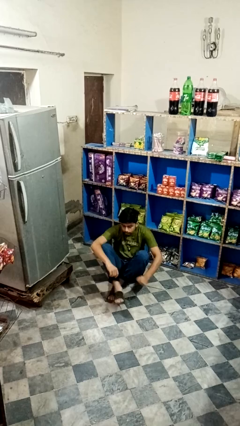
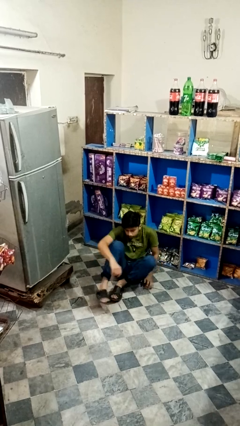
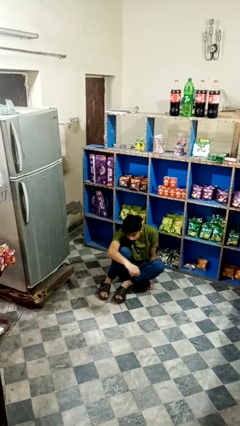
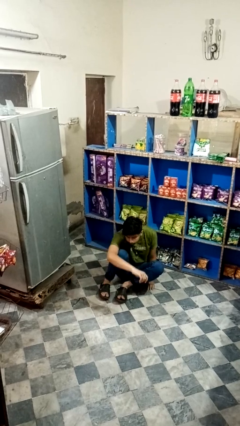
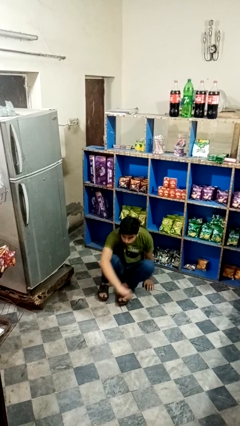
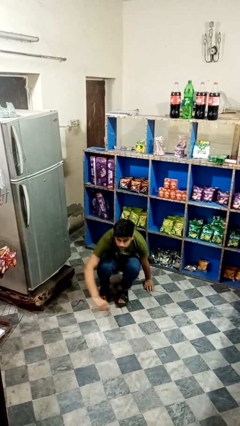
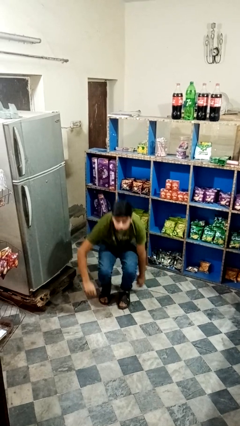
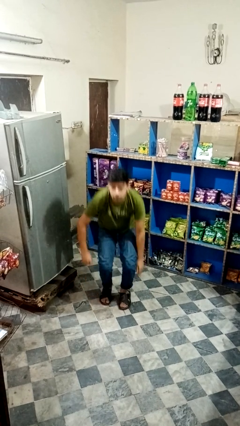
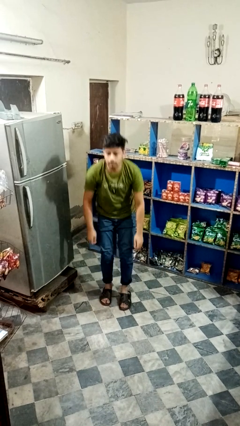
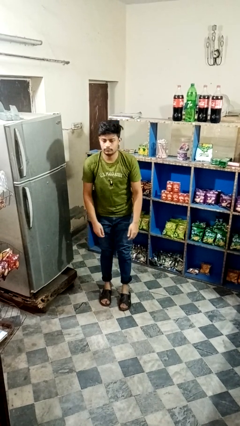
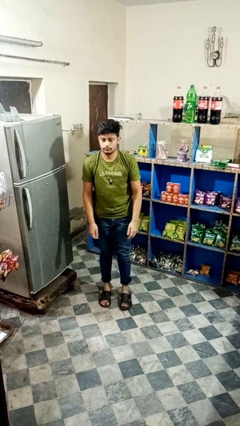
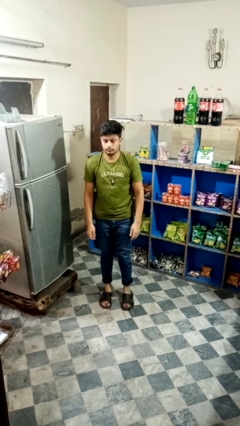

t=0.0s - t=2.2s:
person stands up from floor

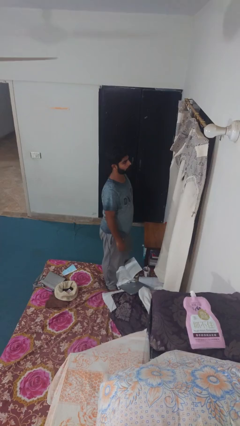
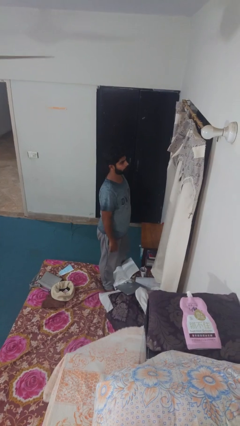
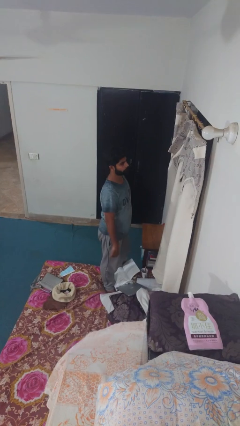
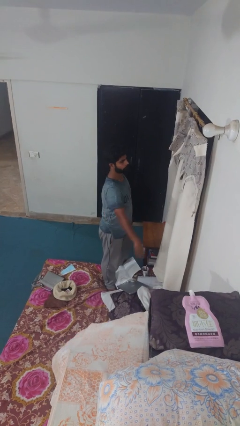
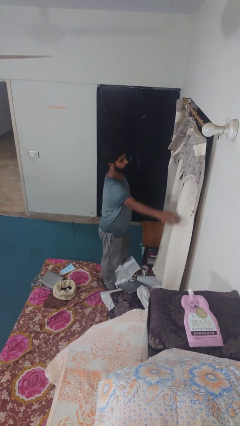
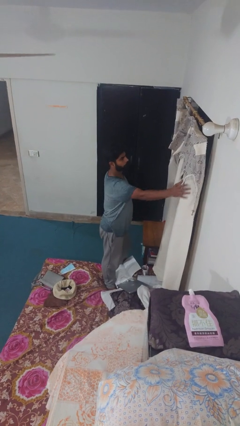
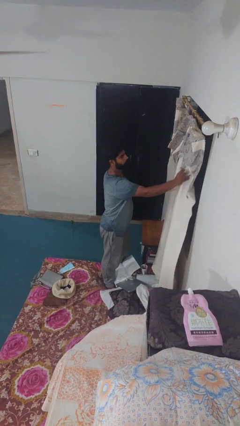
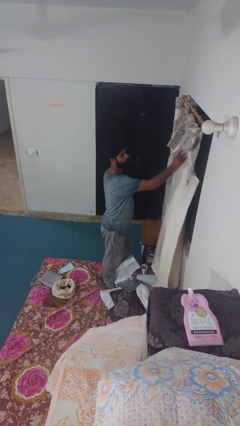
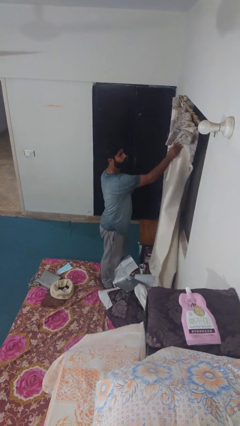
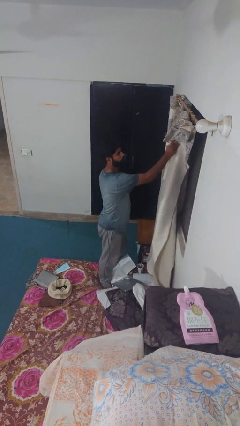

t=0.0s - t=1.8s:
person opens curtains

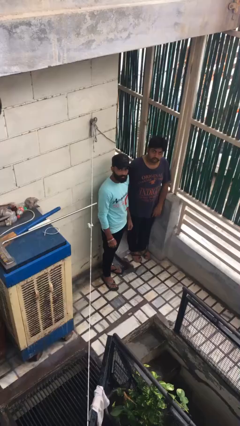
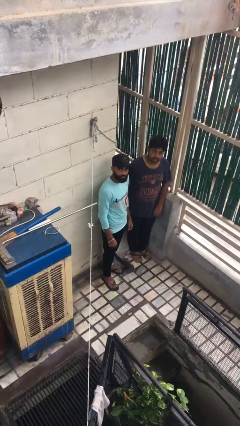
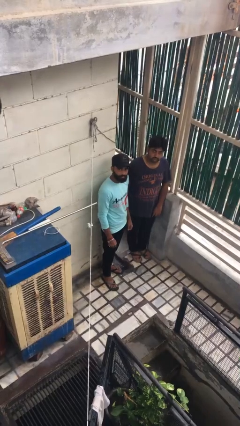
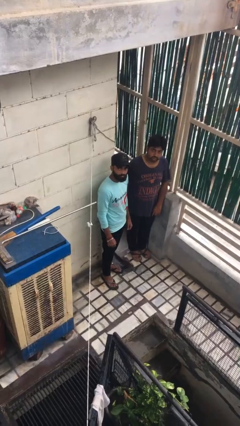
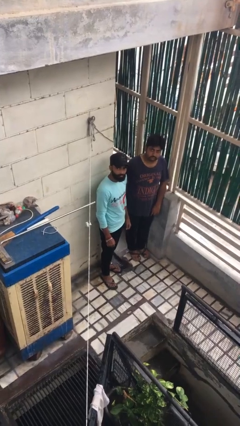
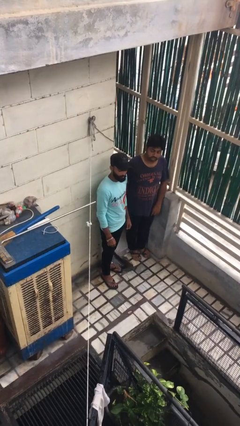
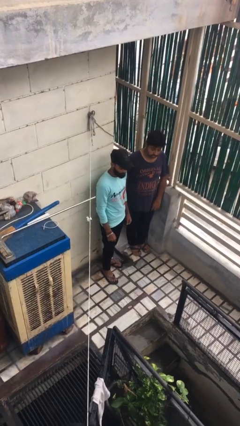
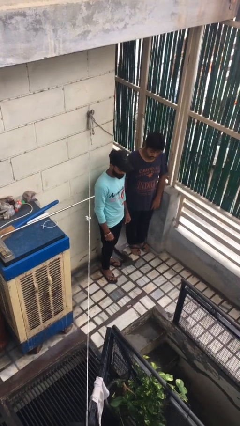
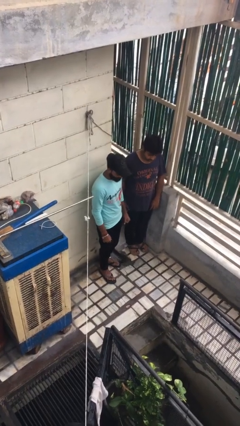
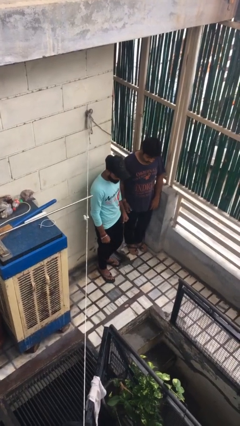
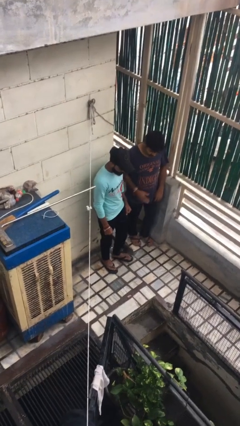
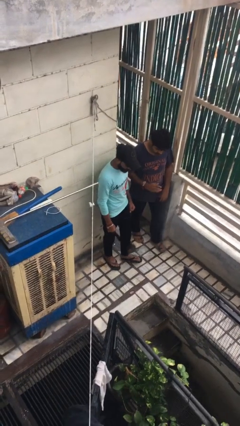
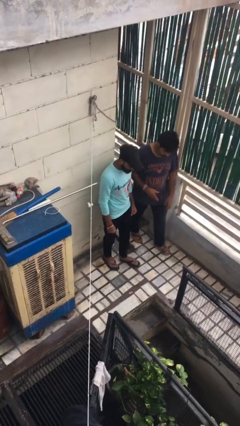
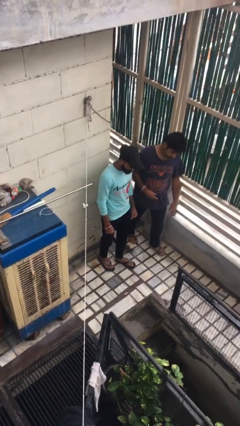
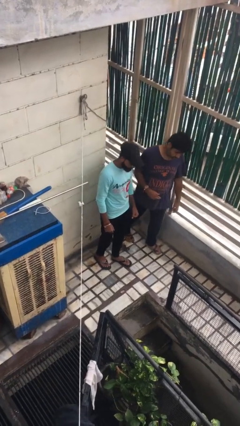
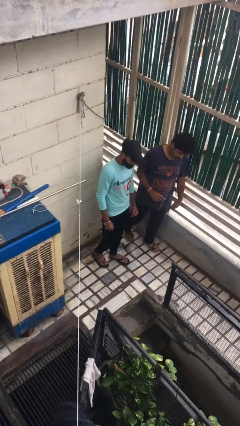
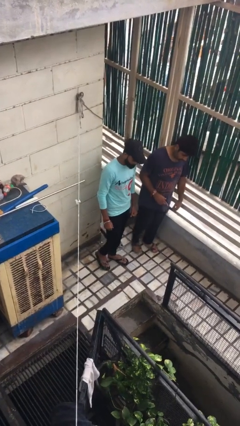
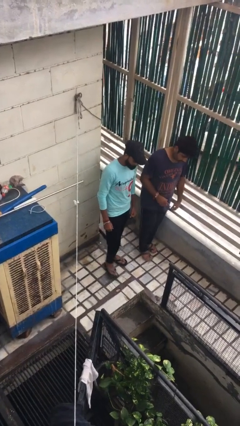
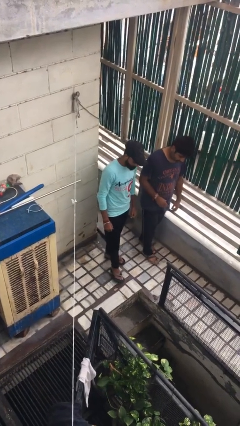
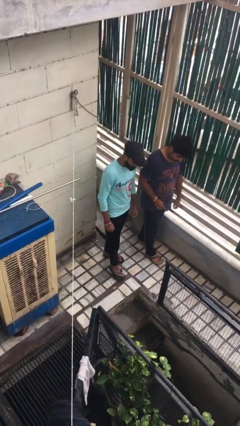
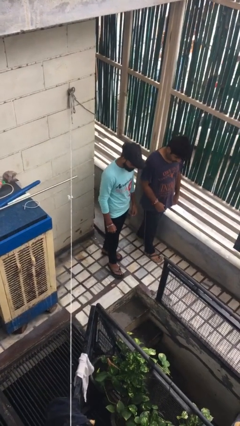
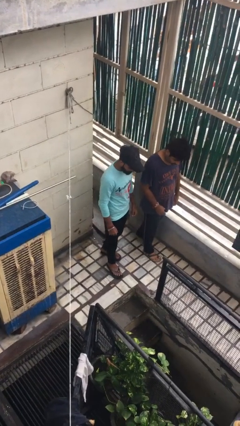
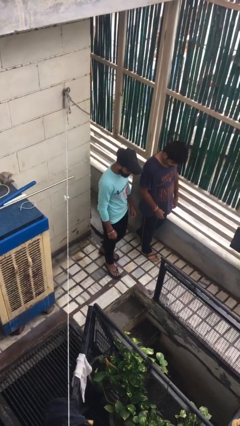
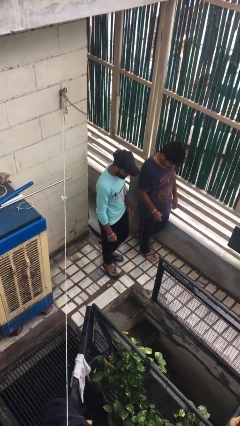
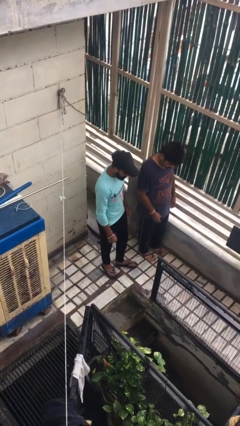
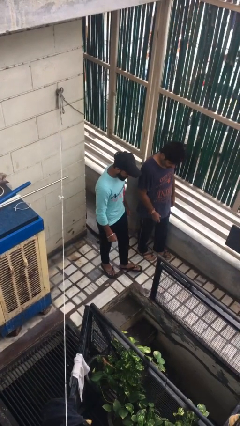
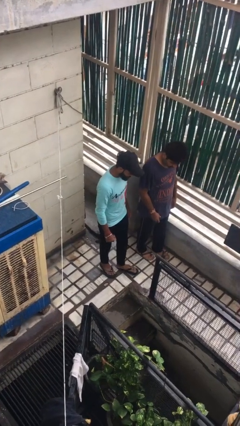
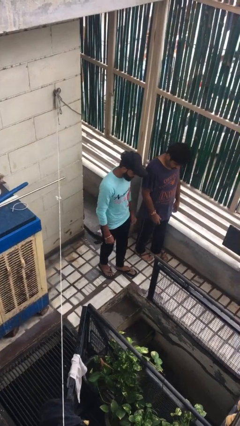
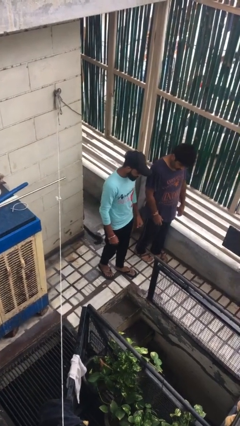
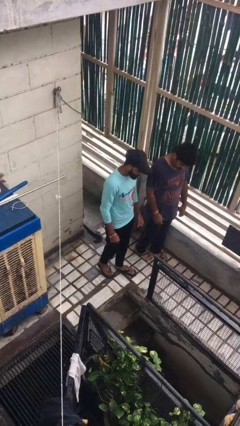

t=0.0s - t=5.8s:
person talks to person

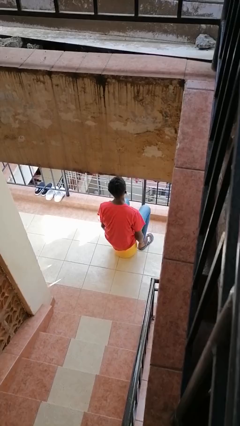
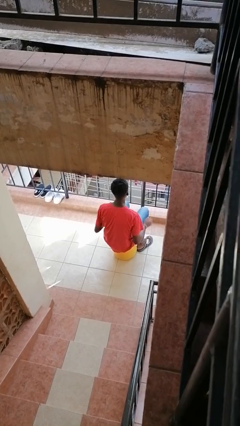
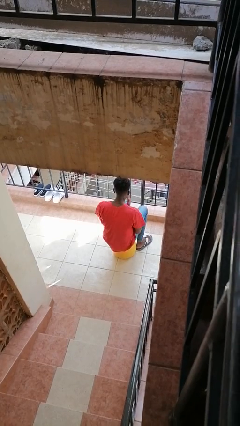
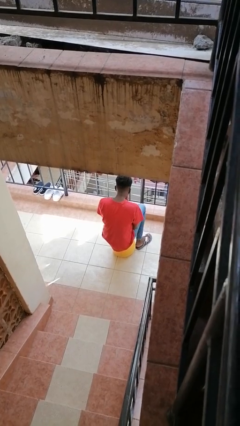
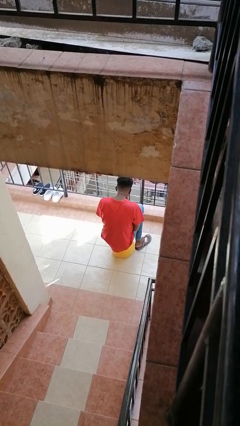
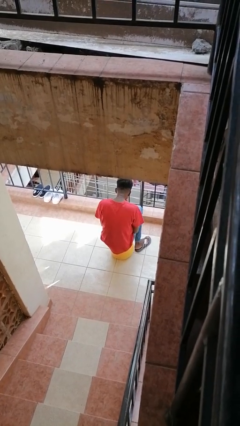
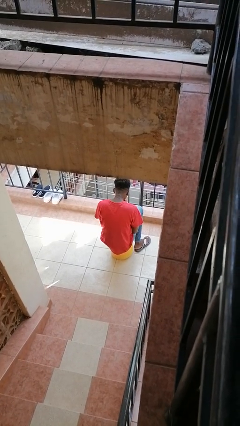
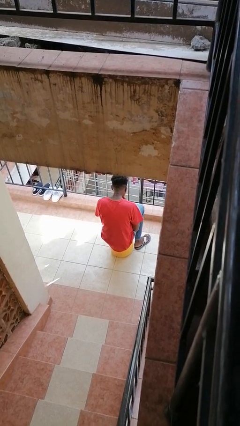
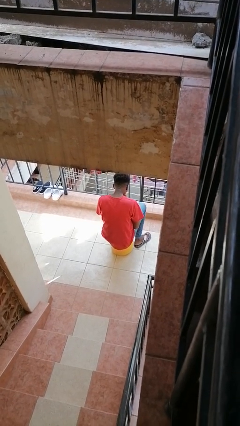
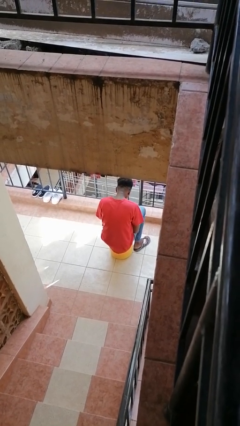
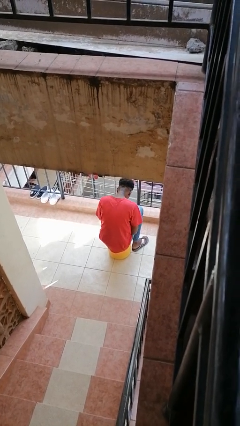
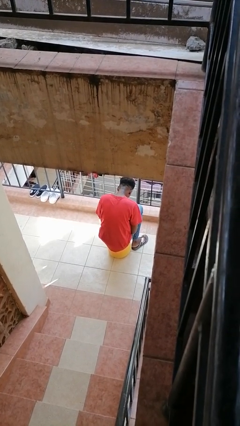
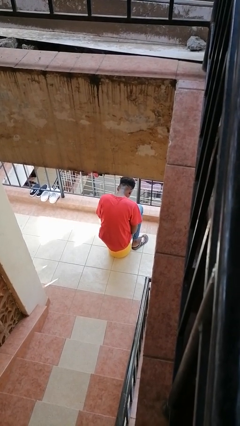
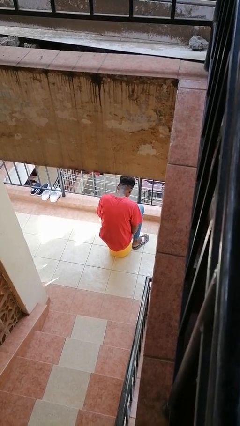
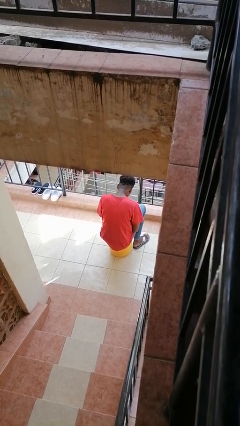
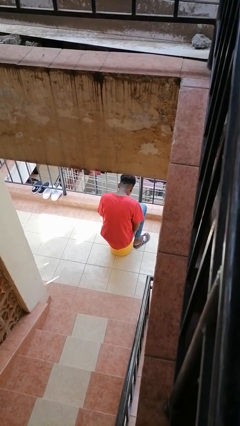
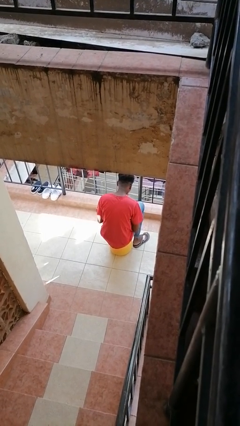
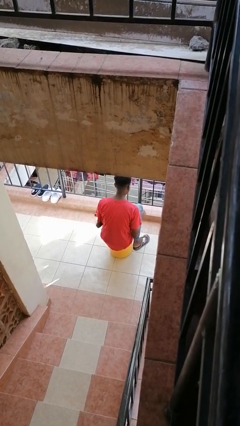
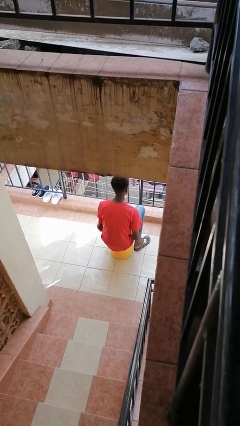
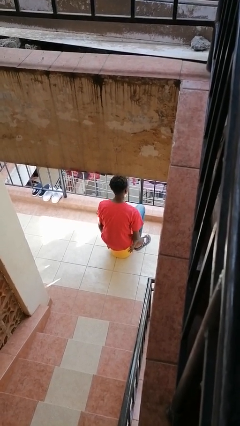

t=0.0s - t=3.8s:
person blows into hands

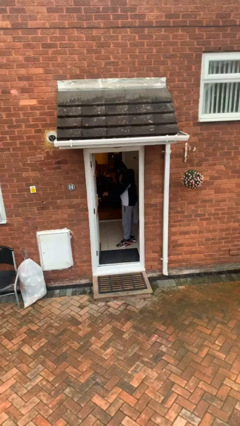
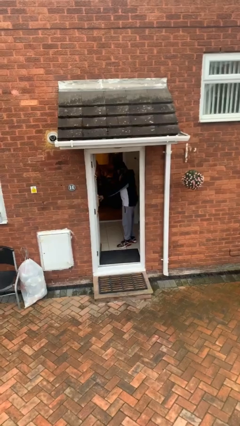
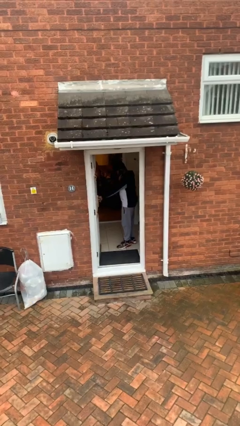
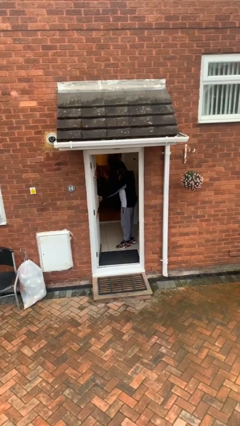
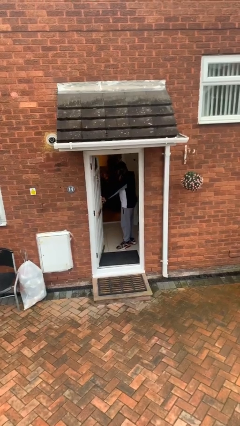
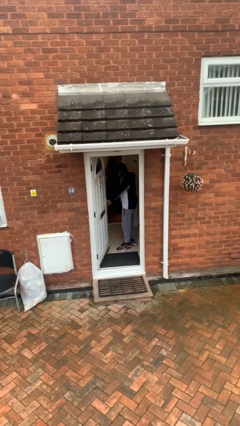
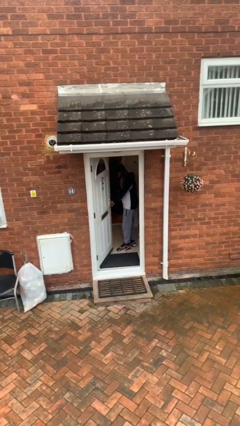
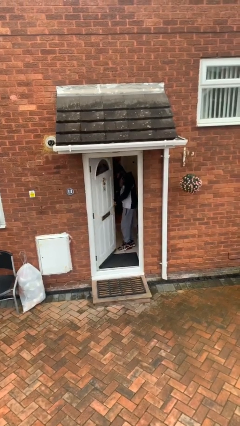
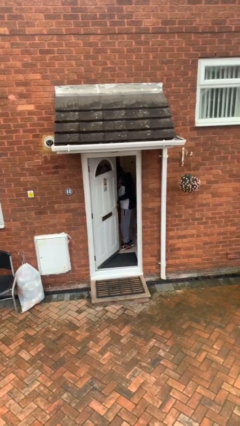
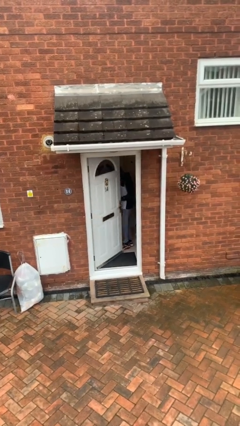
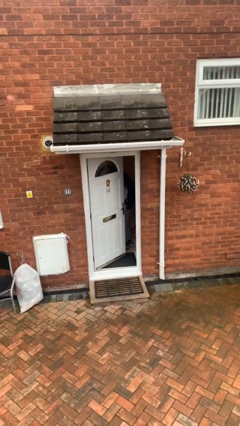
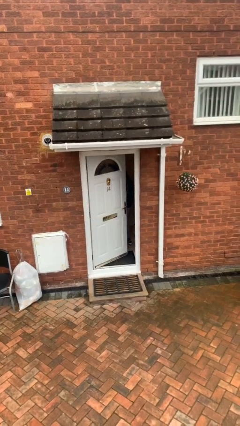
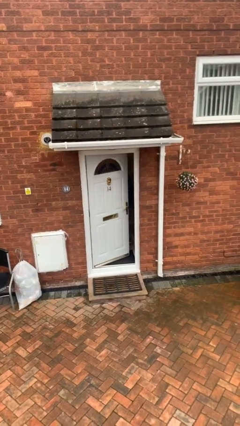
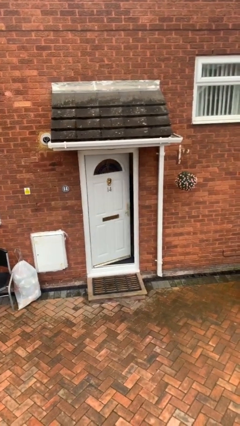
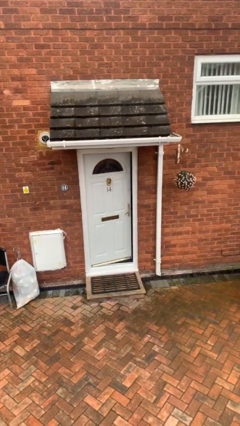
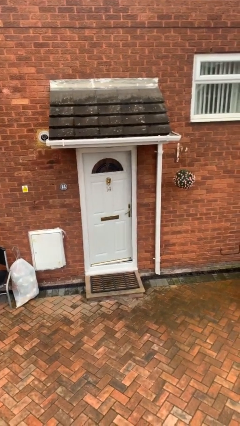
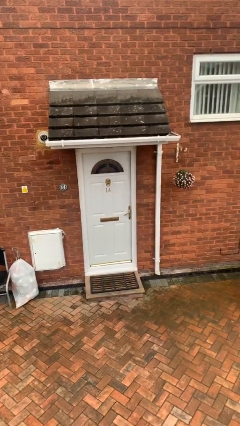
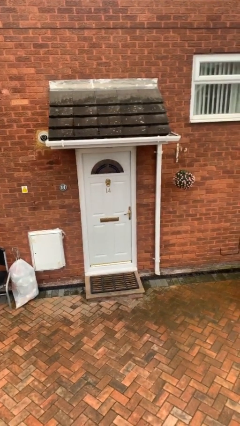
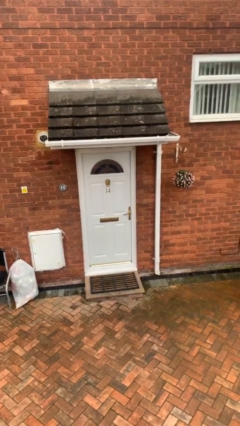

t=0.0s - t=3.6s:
person closes facility door

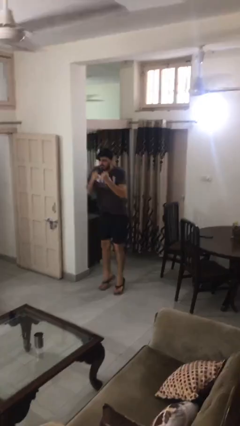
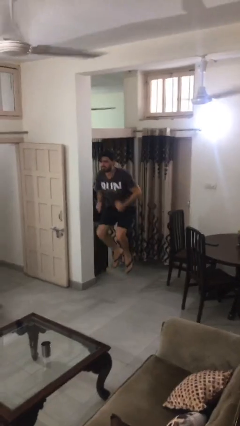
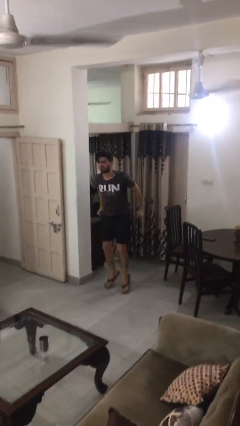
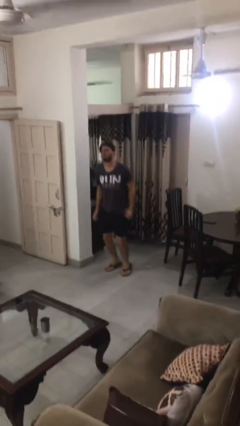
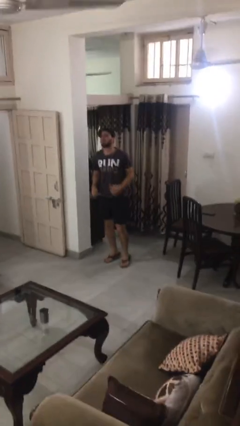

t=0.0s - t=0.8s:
person jumps
